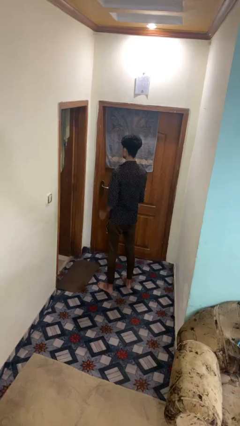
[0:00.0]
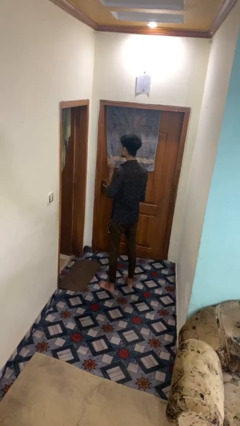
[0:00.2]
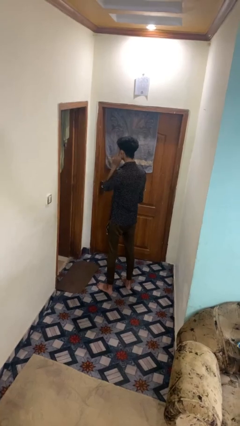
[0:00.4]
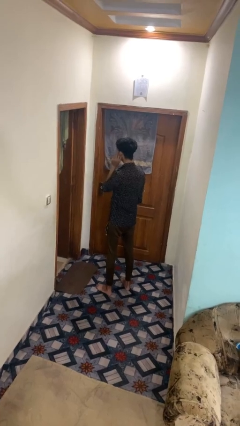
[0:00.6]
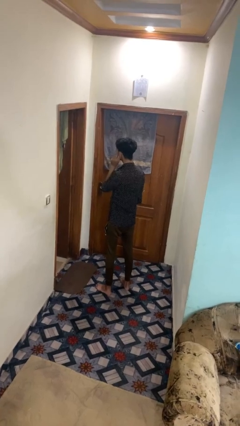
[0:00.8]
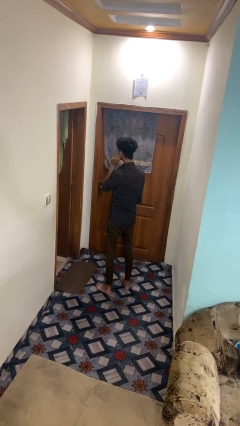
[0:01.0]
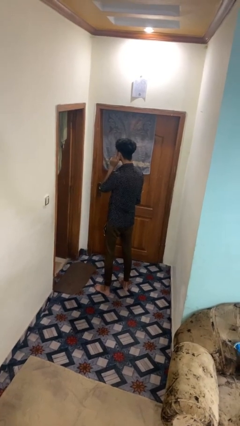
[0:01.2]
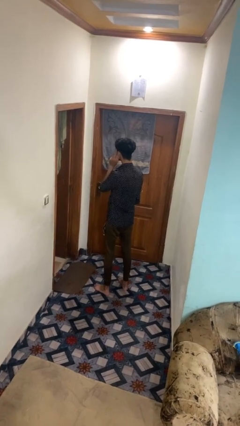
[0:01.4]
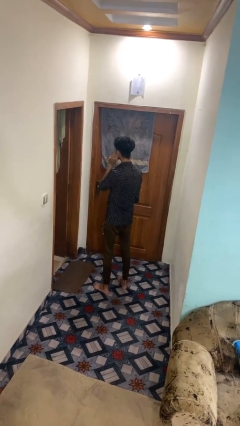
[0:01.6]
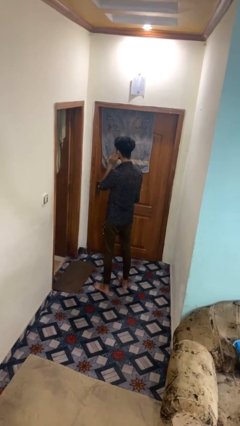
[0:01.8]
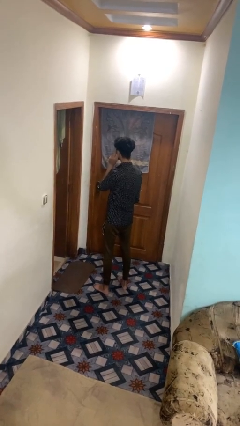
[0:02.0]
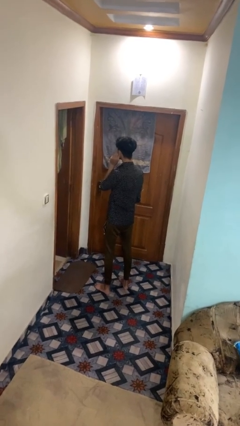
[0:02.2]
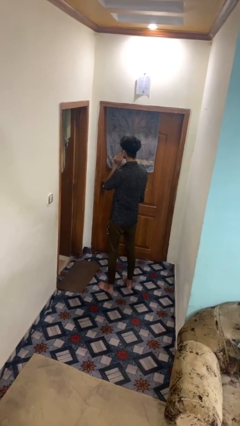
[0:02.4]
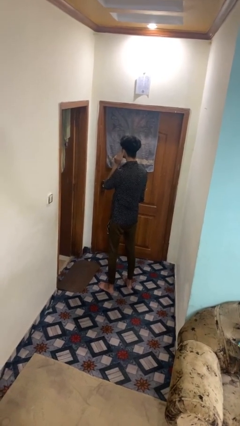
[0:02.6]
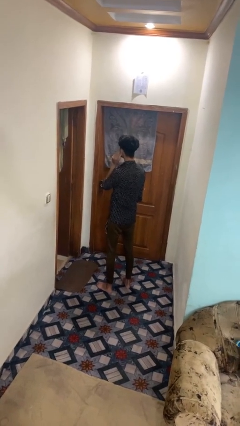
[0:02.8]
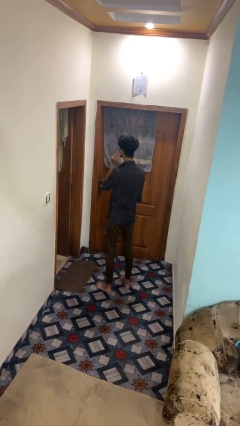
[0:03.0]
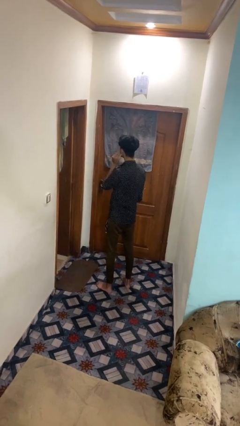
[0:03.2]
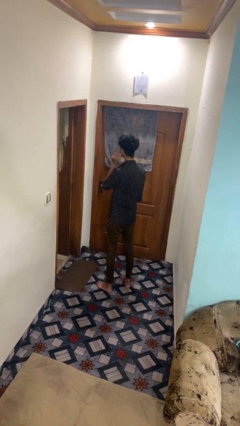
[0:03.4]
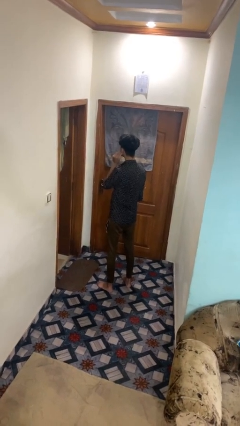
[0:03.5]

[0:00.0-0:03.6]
person touches earlobe

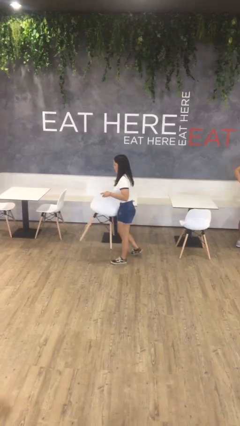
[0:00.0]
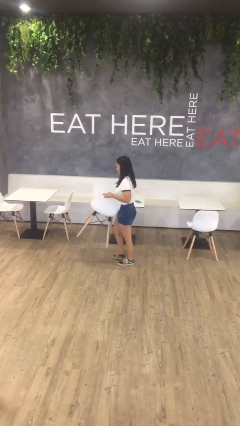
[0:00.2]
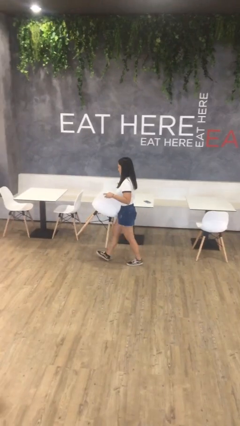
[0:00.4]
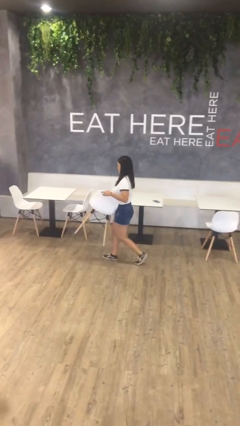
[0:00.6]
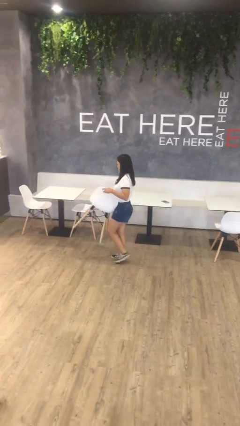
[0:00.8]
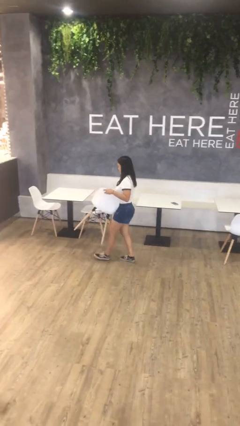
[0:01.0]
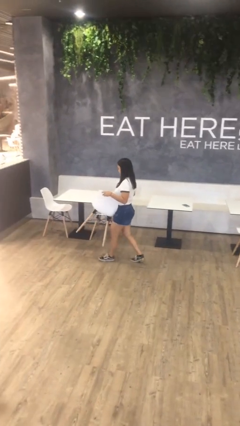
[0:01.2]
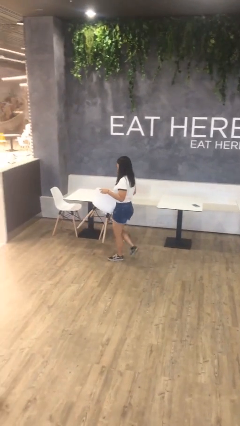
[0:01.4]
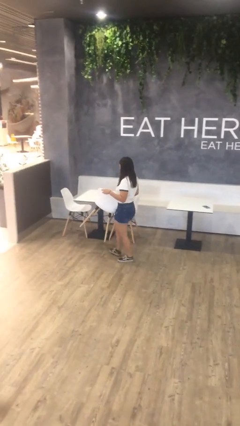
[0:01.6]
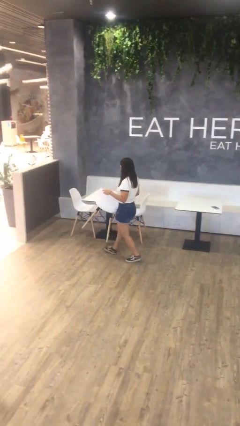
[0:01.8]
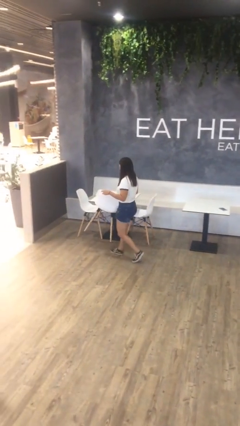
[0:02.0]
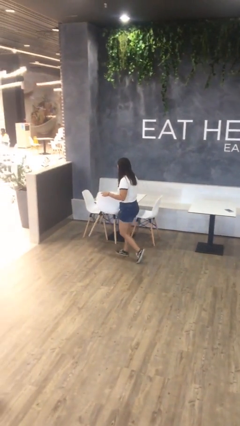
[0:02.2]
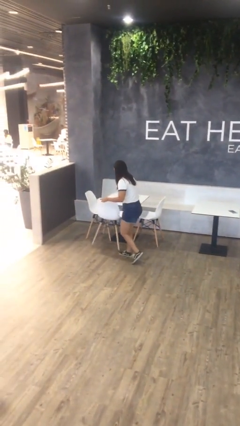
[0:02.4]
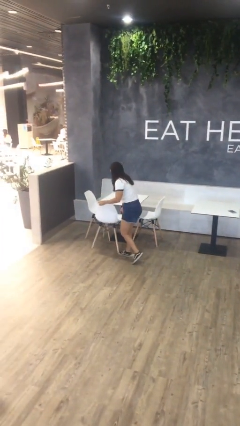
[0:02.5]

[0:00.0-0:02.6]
person carries heavy object

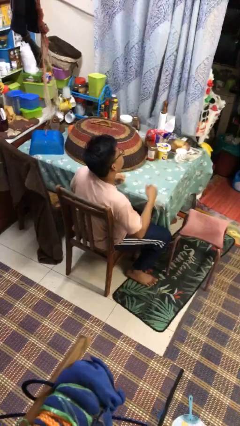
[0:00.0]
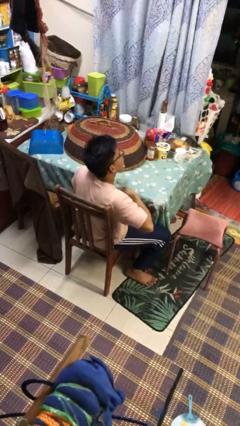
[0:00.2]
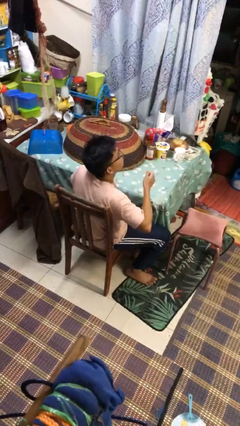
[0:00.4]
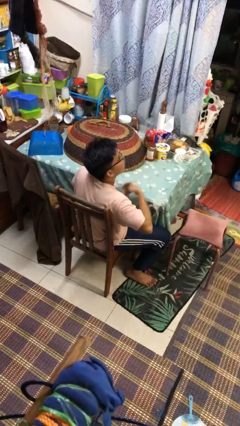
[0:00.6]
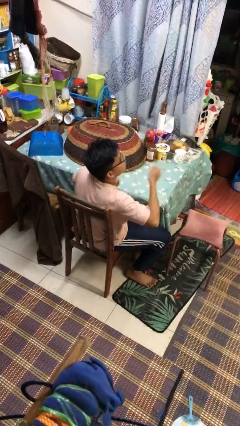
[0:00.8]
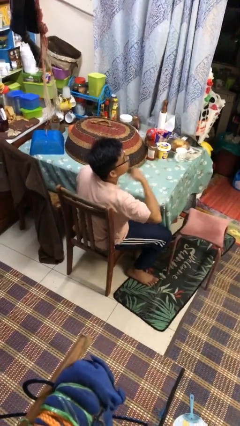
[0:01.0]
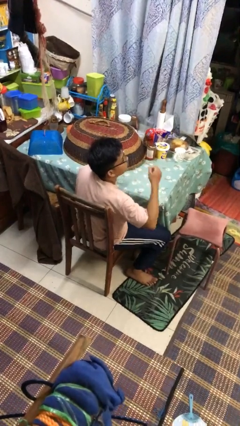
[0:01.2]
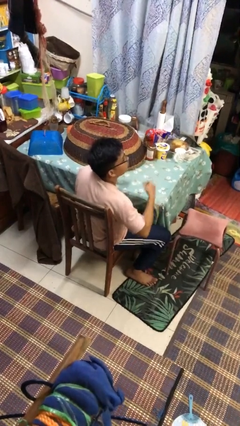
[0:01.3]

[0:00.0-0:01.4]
person drums on chest

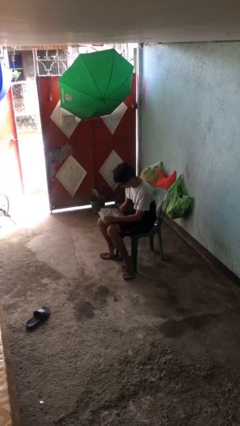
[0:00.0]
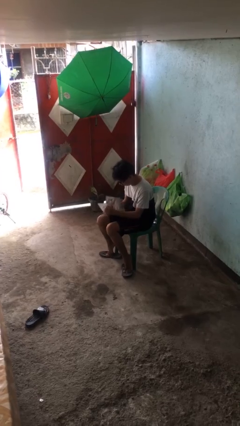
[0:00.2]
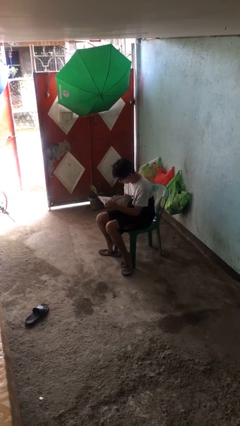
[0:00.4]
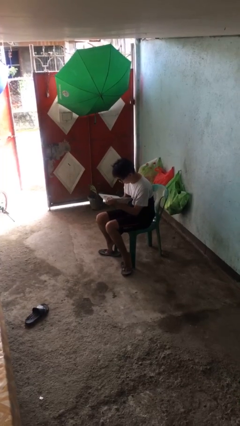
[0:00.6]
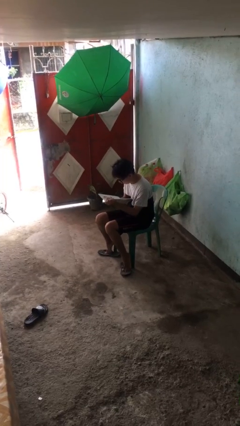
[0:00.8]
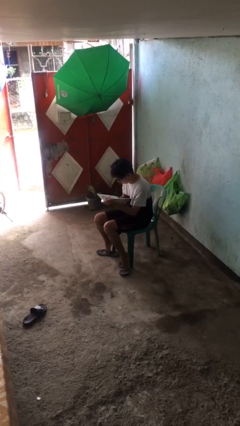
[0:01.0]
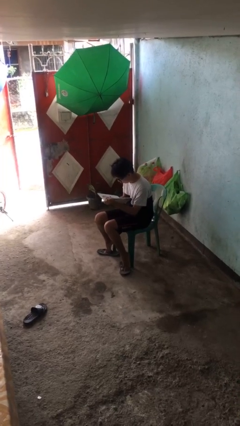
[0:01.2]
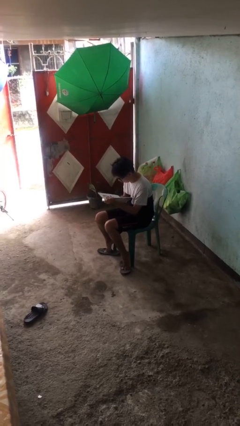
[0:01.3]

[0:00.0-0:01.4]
person reads document

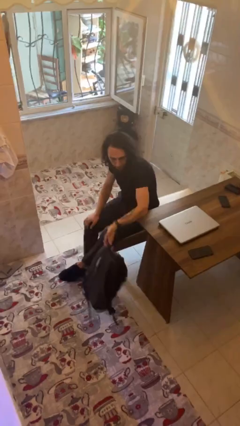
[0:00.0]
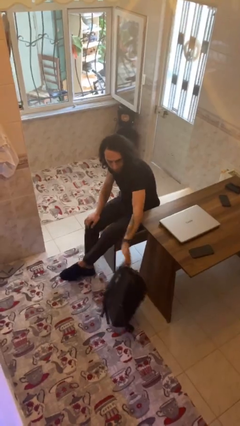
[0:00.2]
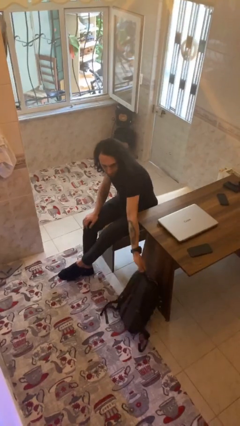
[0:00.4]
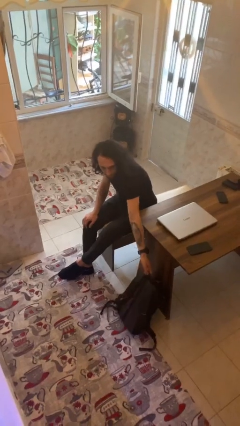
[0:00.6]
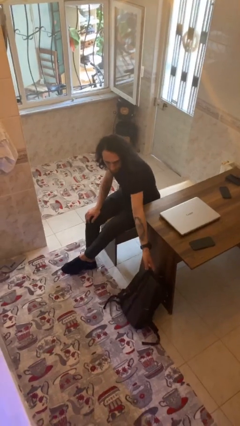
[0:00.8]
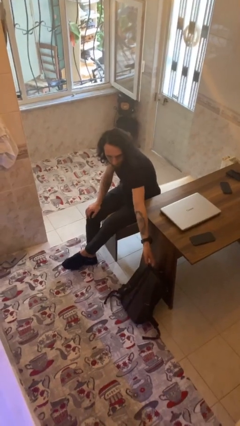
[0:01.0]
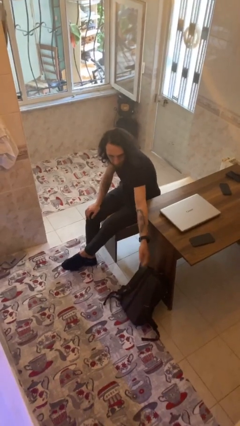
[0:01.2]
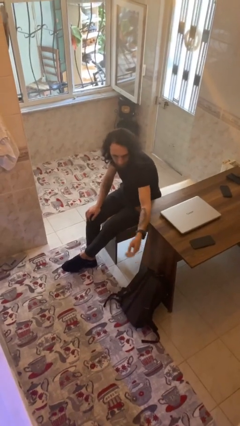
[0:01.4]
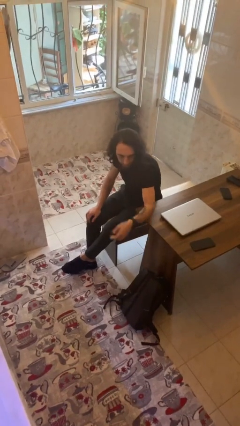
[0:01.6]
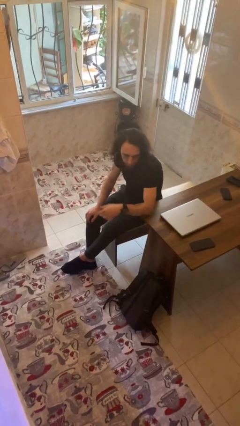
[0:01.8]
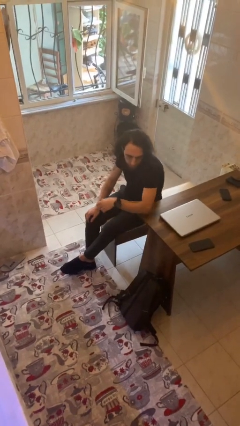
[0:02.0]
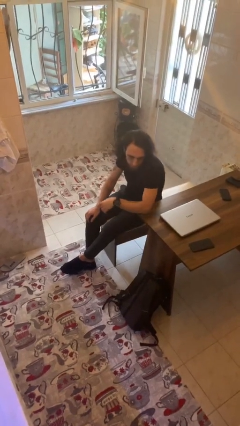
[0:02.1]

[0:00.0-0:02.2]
person puts down object on floor

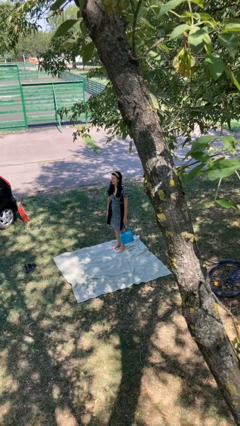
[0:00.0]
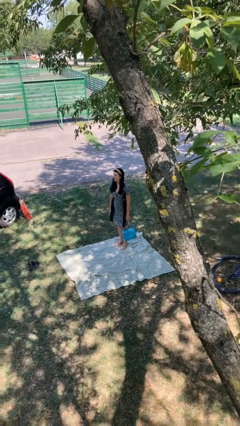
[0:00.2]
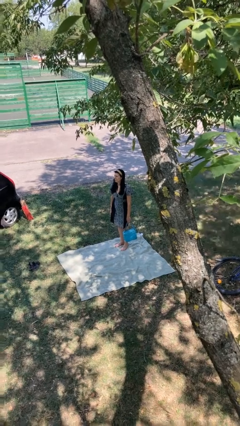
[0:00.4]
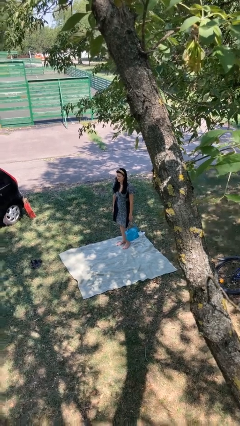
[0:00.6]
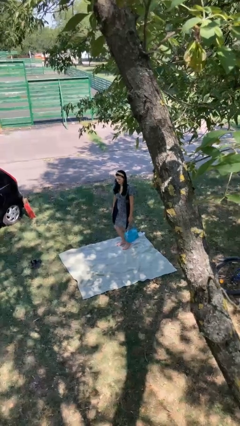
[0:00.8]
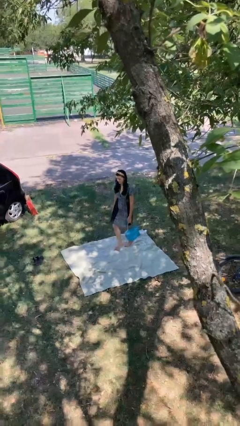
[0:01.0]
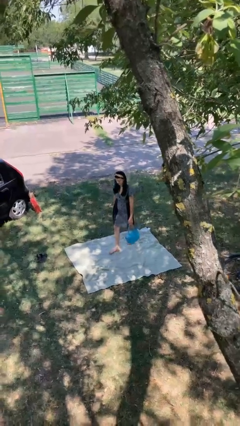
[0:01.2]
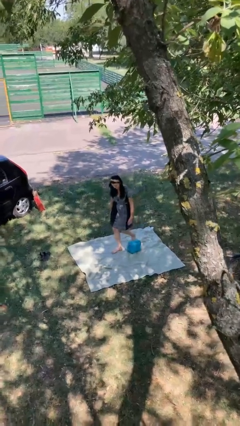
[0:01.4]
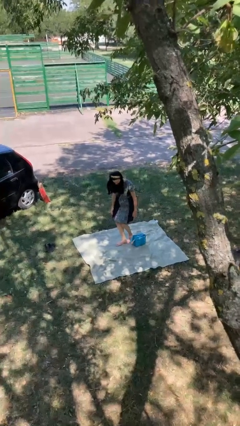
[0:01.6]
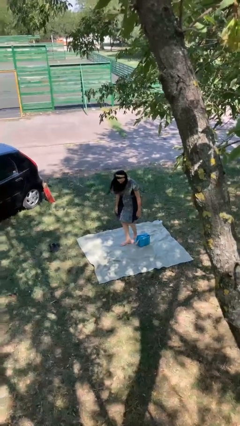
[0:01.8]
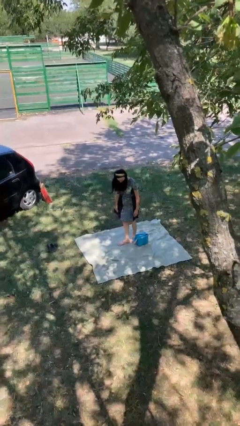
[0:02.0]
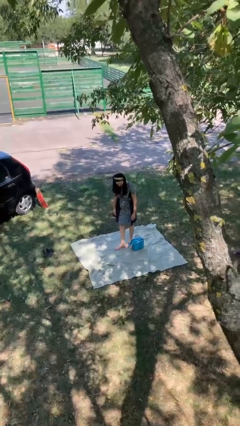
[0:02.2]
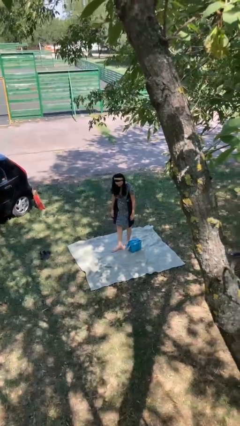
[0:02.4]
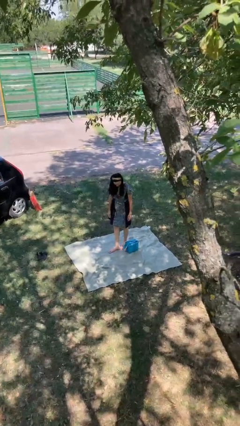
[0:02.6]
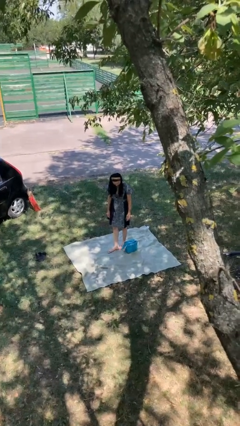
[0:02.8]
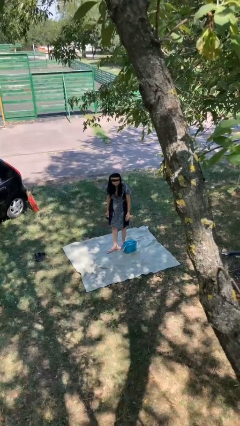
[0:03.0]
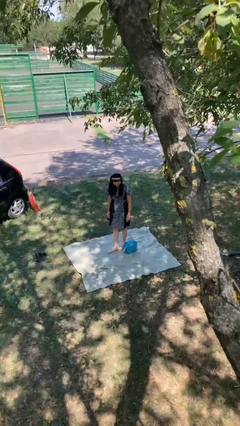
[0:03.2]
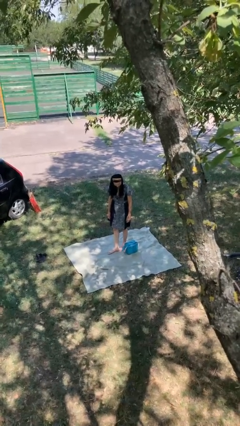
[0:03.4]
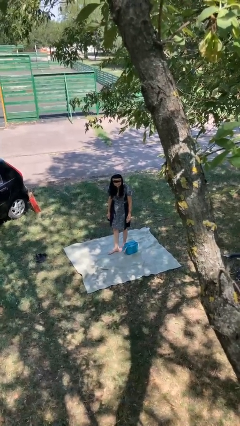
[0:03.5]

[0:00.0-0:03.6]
person drops object

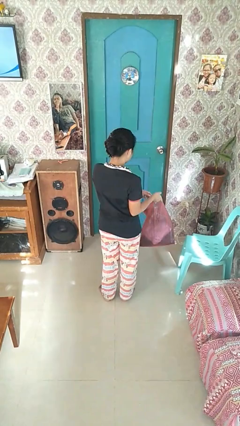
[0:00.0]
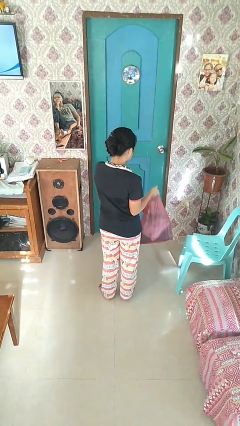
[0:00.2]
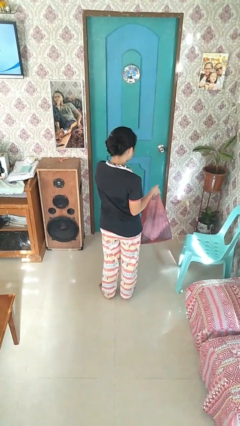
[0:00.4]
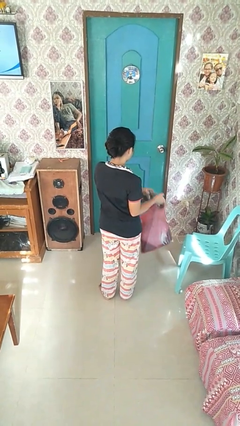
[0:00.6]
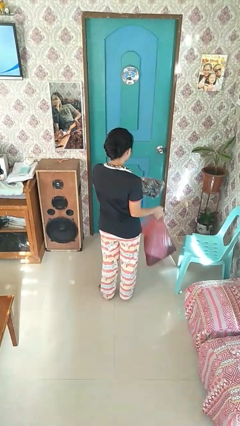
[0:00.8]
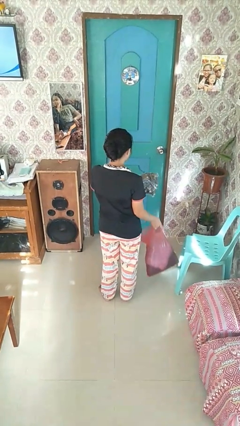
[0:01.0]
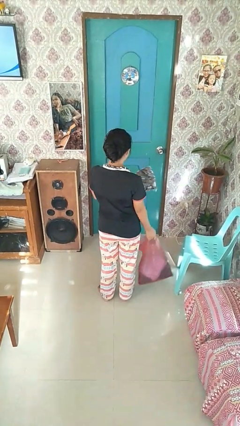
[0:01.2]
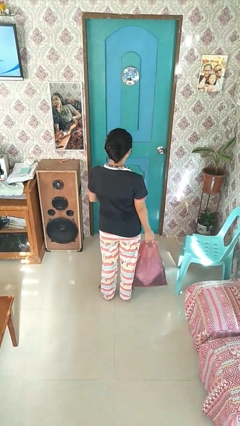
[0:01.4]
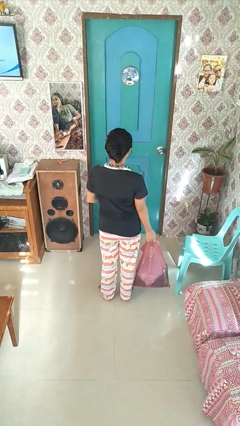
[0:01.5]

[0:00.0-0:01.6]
person takes object from bag

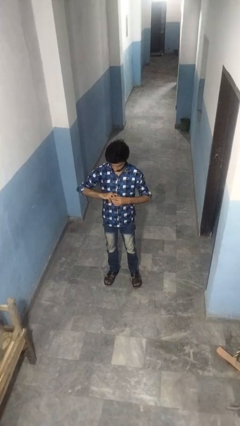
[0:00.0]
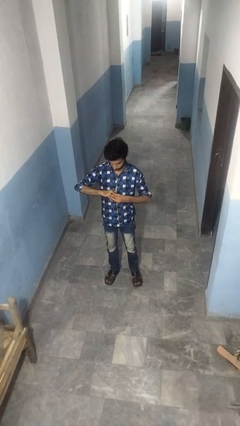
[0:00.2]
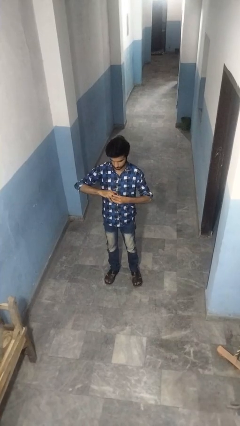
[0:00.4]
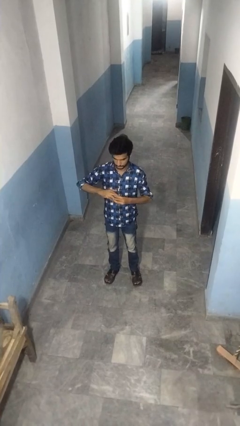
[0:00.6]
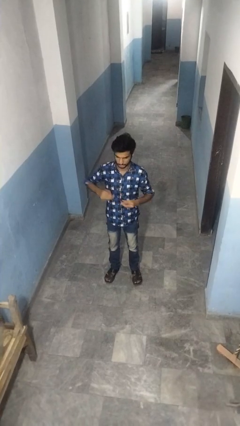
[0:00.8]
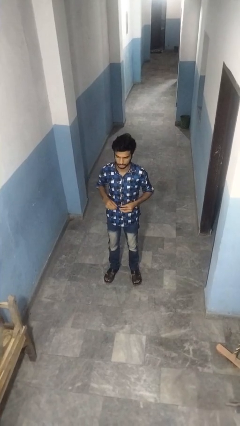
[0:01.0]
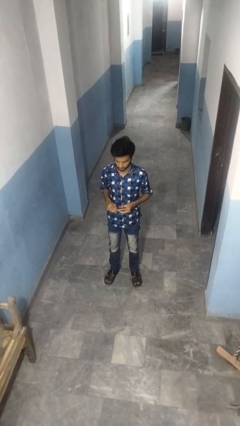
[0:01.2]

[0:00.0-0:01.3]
person takes off ring
